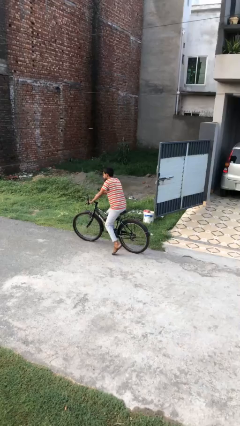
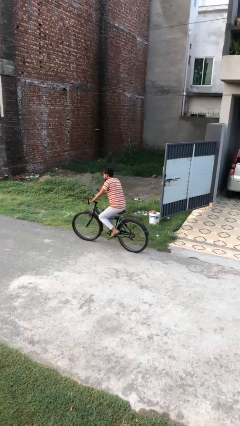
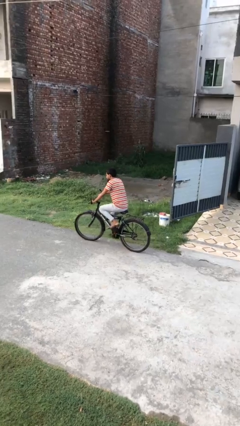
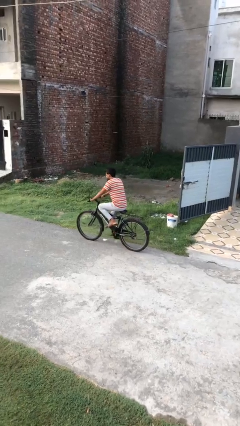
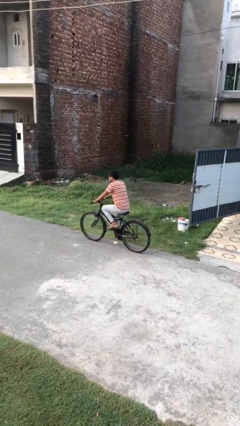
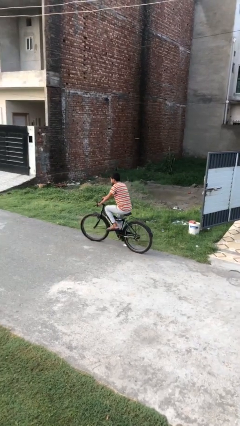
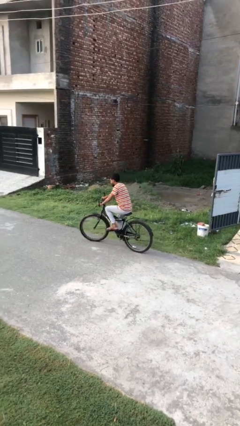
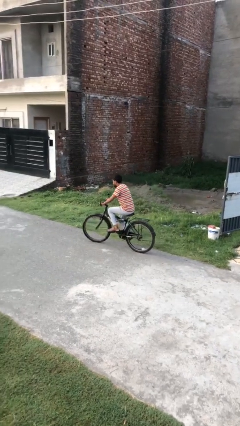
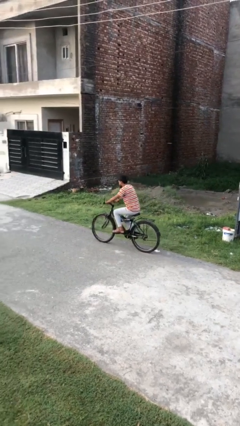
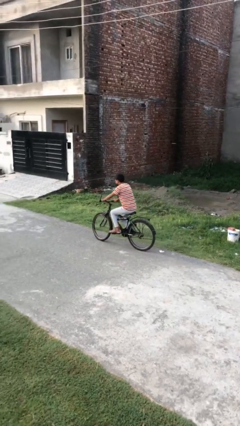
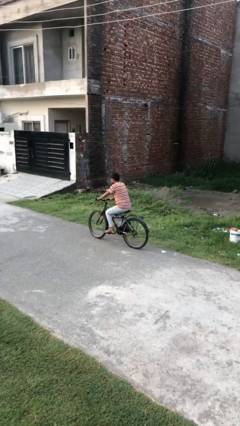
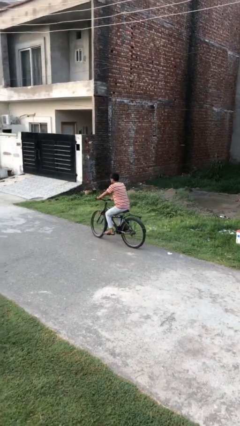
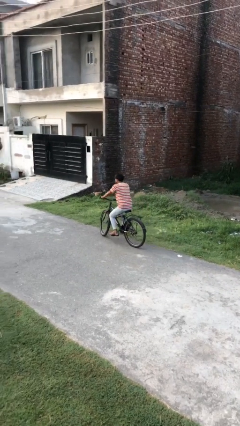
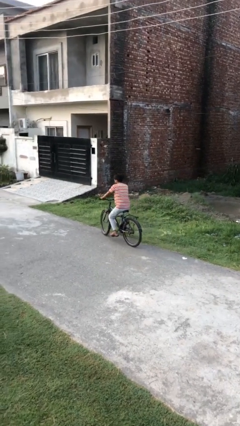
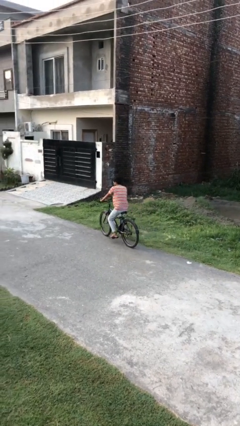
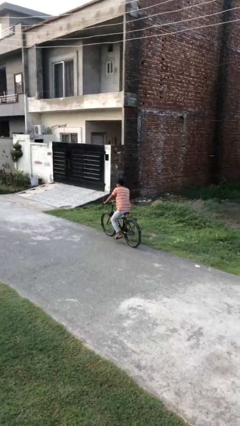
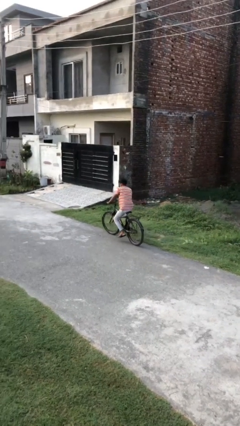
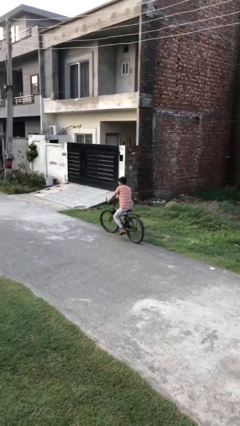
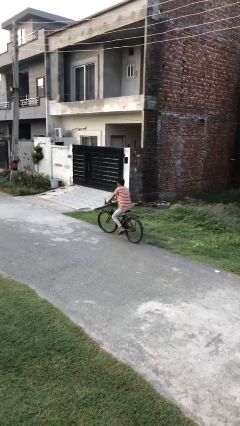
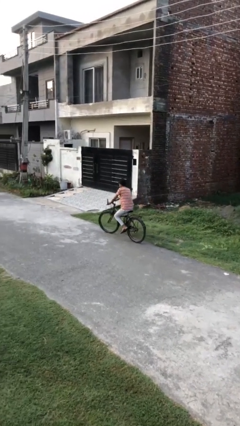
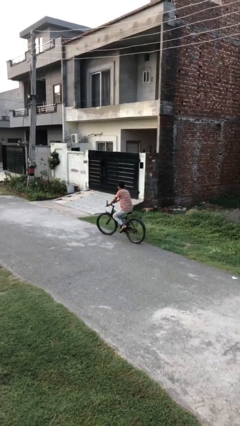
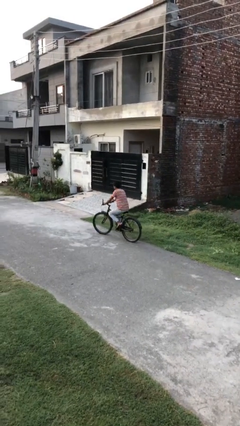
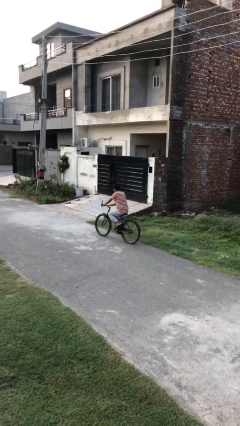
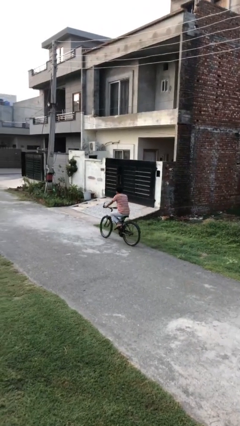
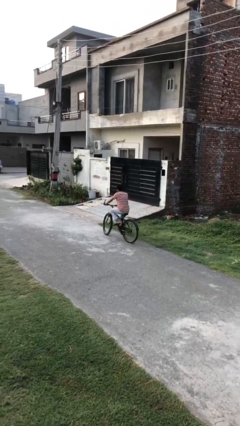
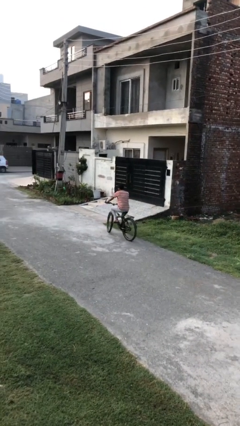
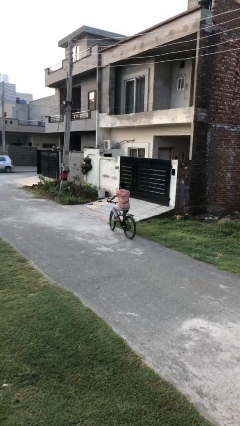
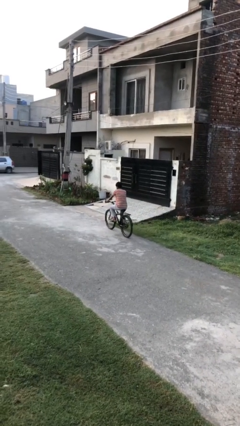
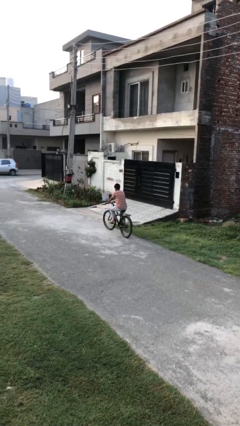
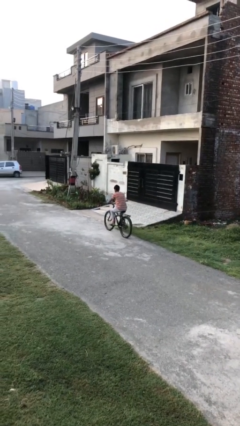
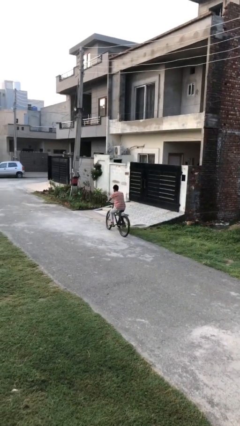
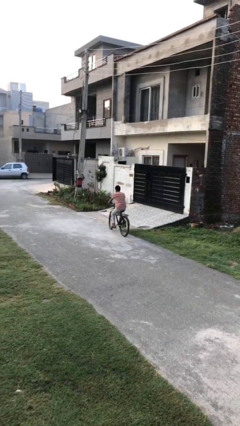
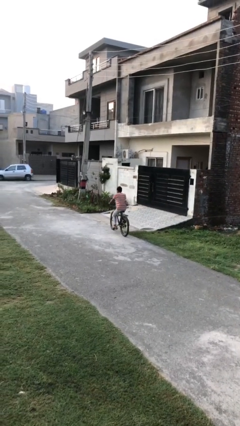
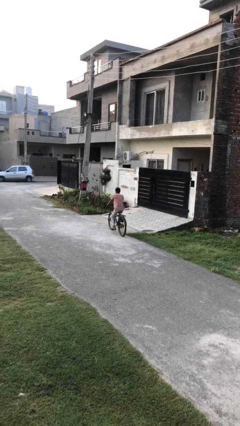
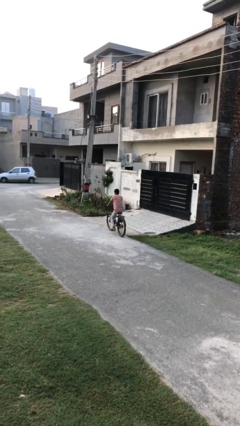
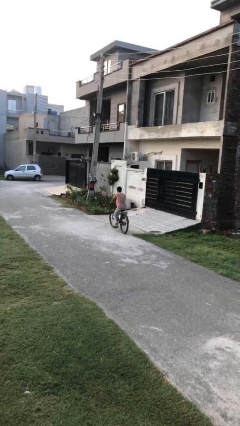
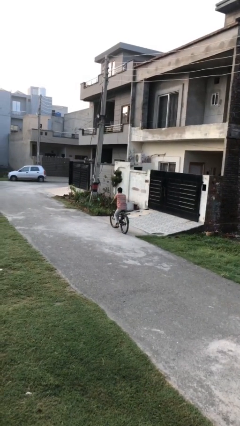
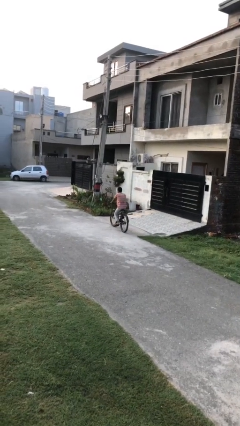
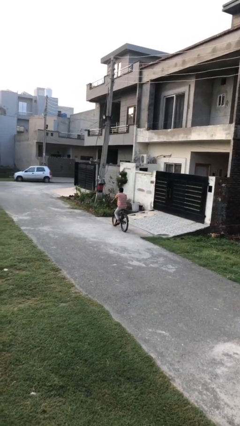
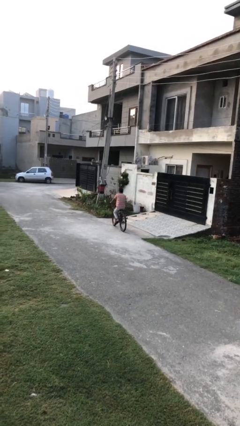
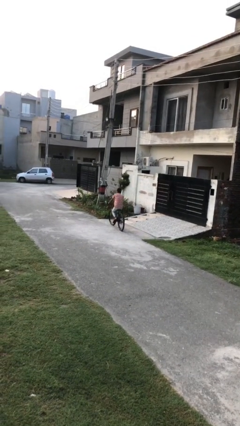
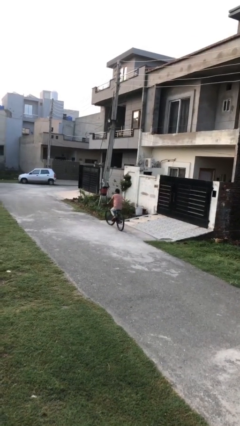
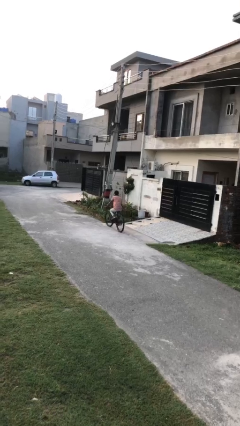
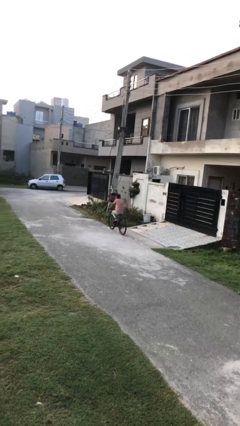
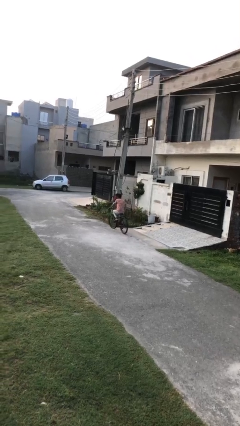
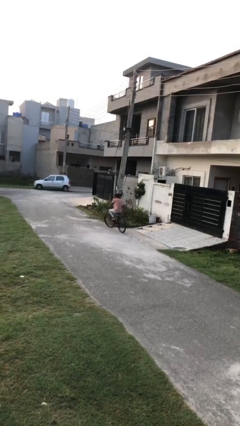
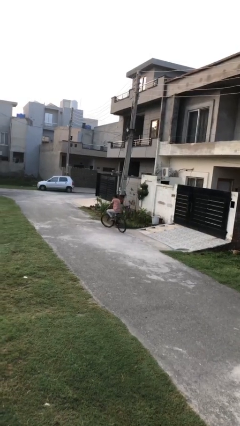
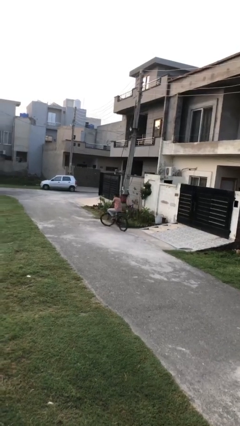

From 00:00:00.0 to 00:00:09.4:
person rides bicycle

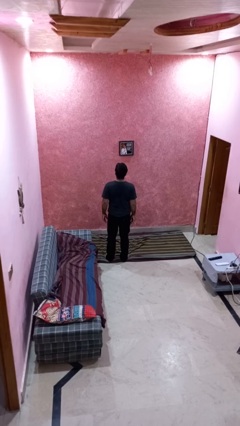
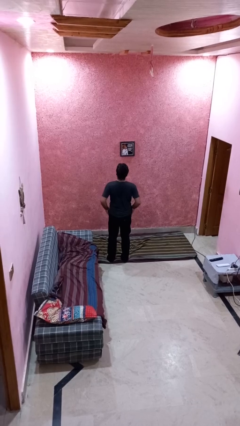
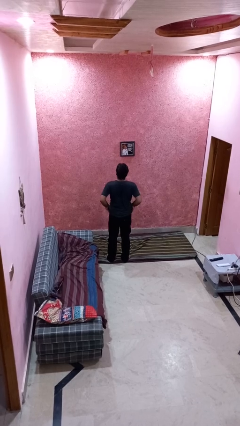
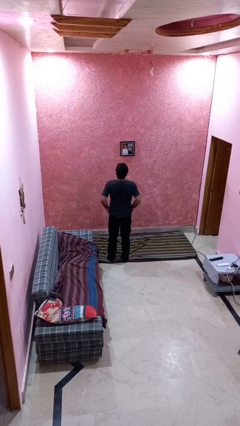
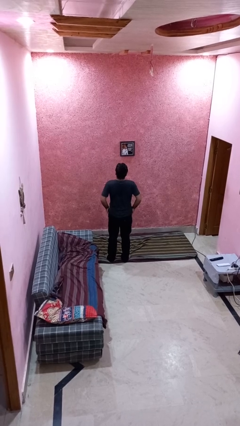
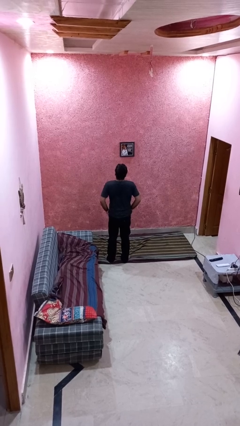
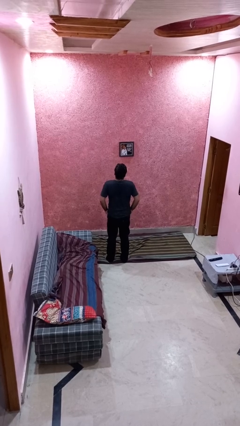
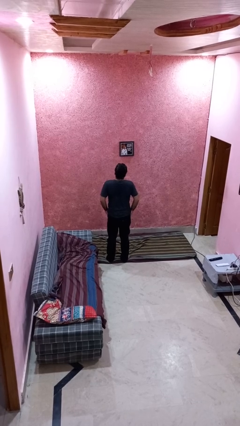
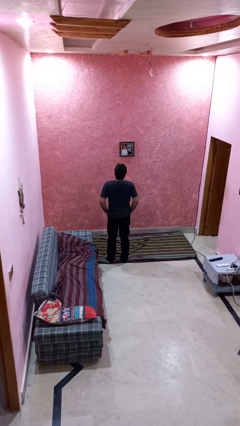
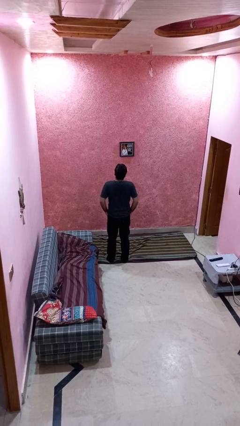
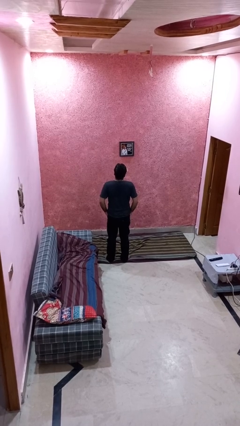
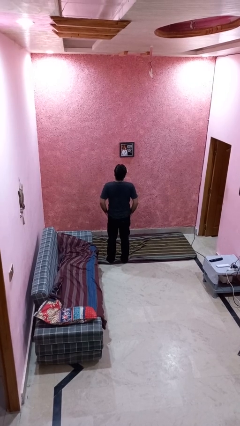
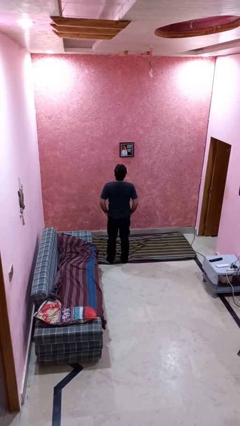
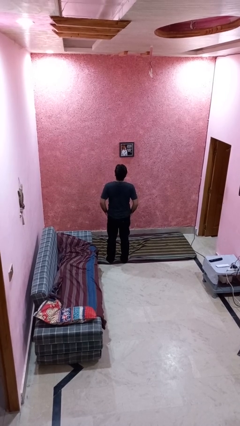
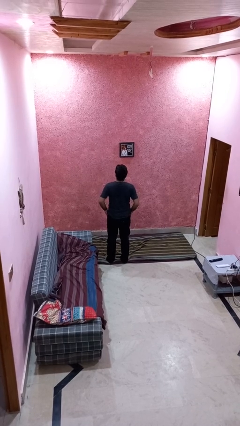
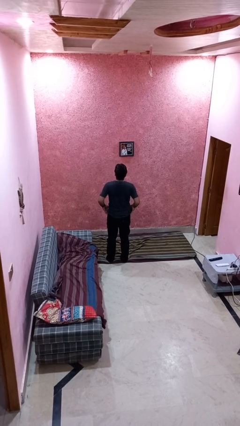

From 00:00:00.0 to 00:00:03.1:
person puts hands in back pockets

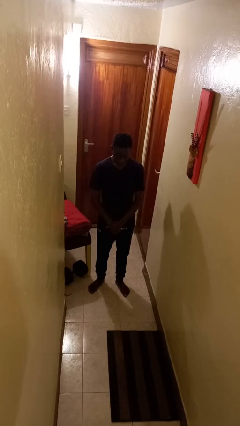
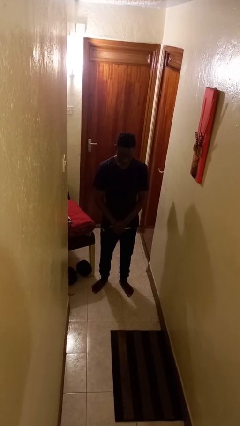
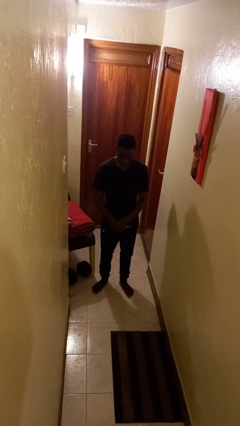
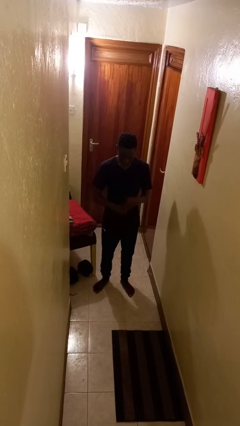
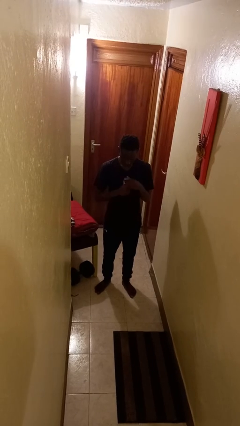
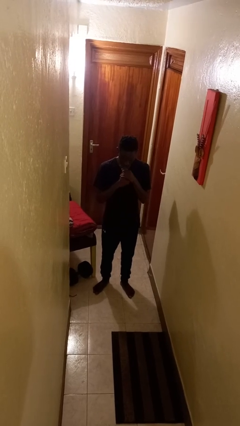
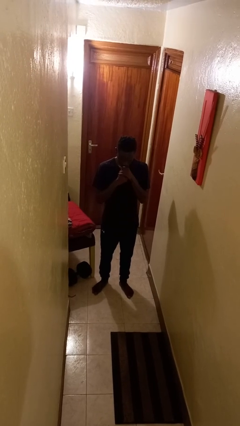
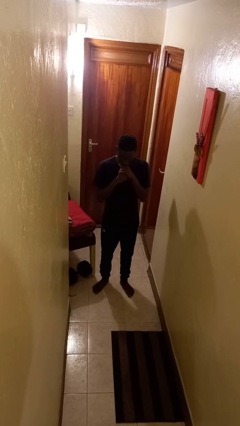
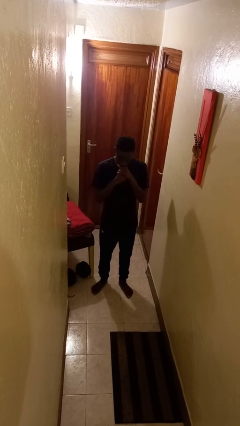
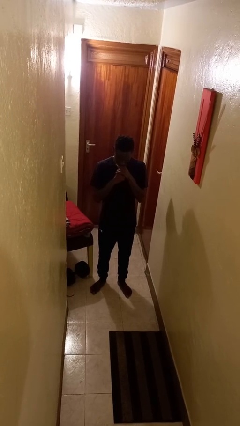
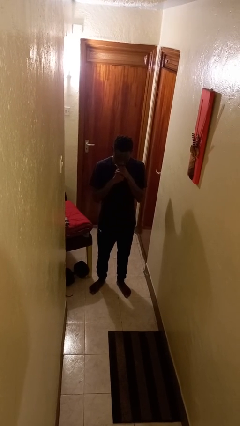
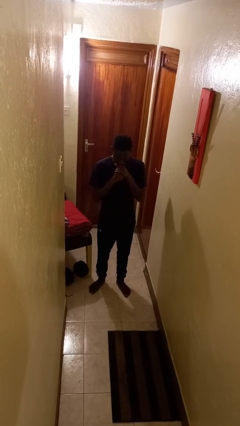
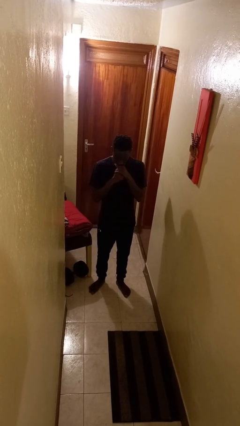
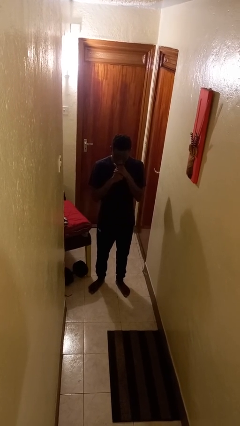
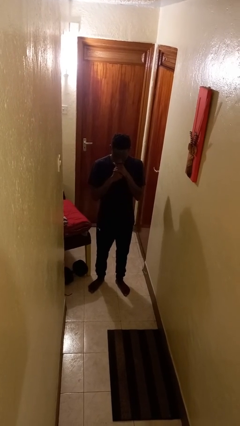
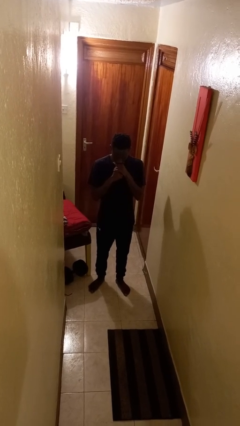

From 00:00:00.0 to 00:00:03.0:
person vapes

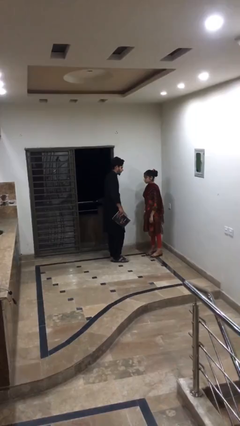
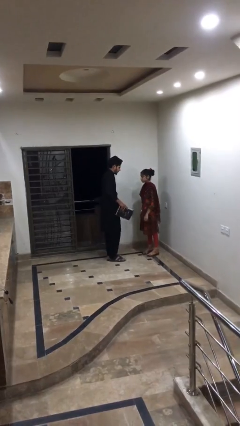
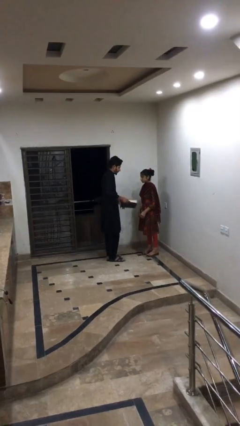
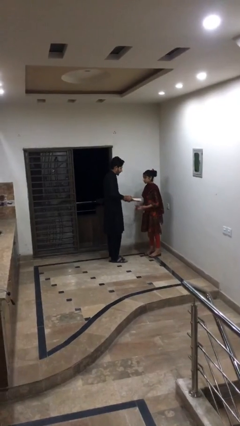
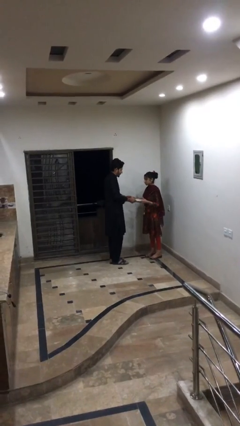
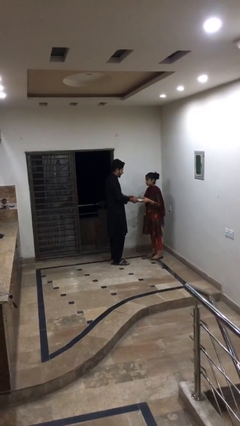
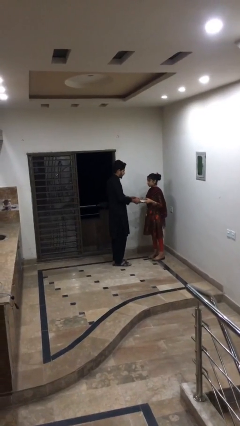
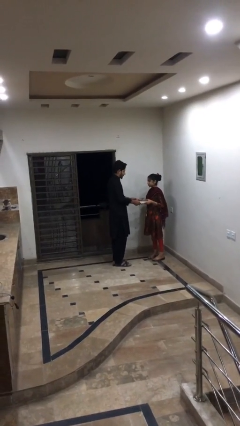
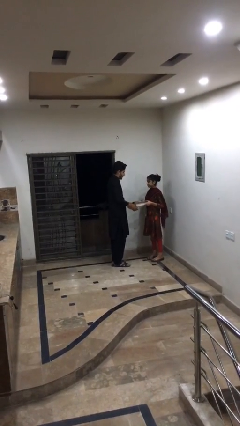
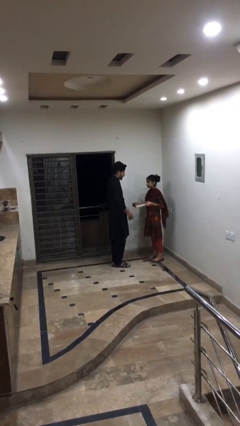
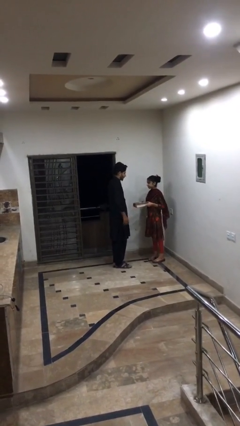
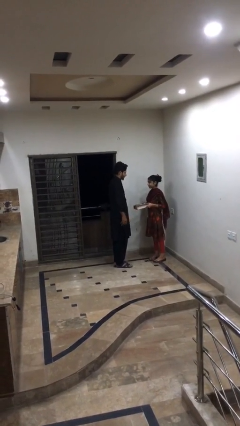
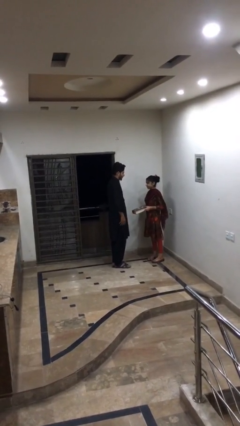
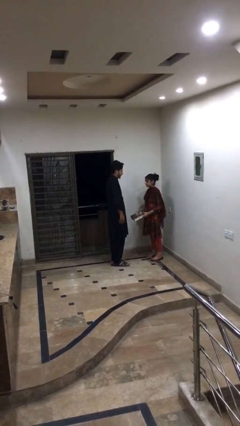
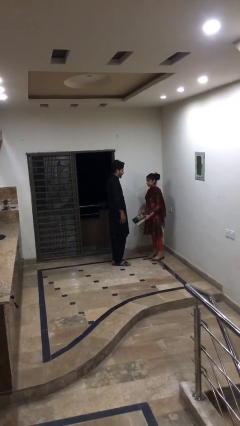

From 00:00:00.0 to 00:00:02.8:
person transfers object to person
